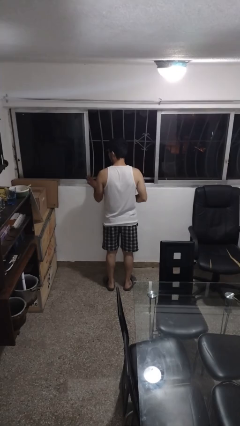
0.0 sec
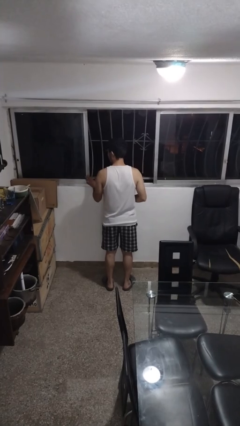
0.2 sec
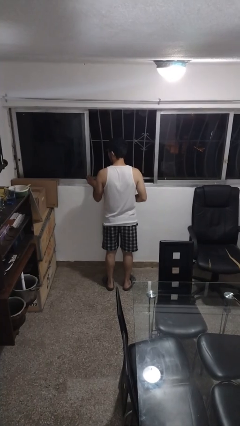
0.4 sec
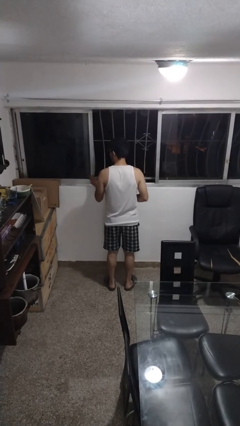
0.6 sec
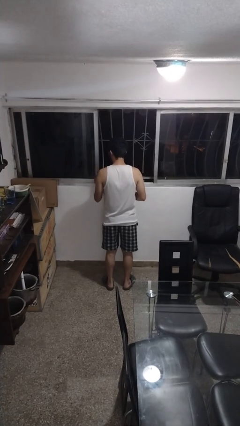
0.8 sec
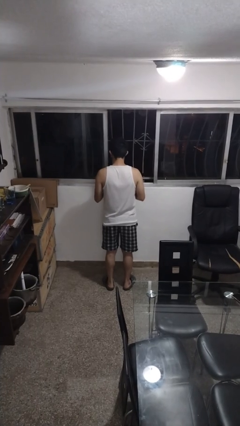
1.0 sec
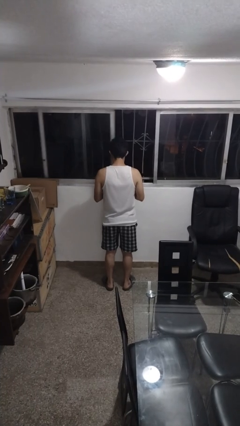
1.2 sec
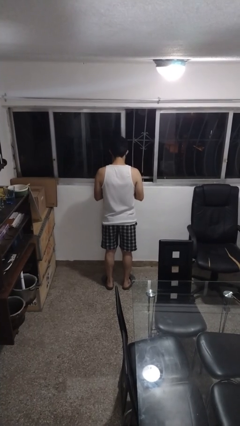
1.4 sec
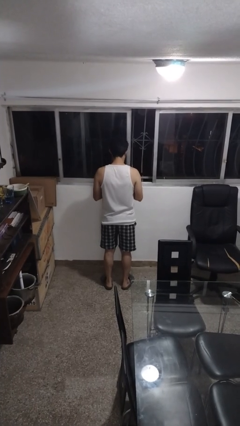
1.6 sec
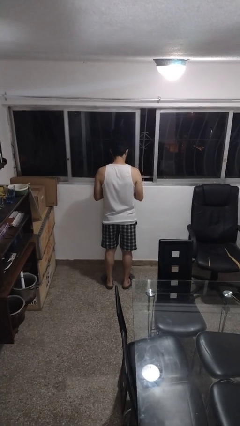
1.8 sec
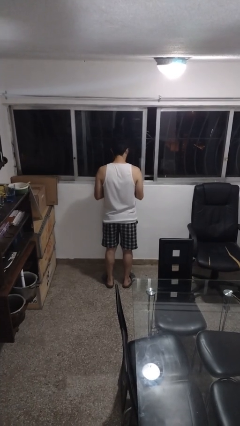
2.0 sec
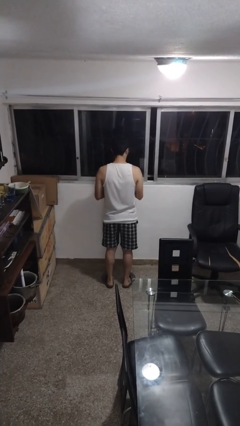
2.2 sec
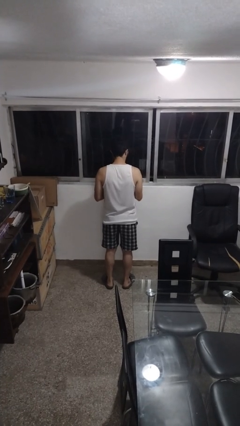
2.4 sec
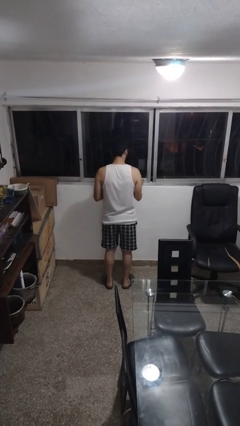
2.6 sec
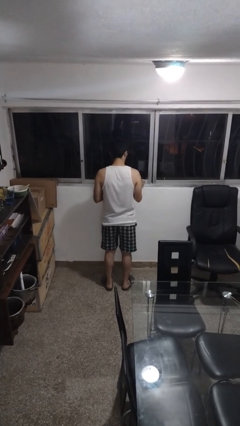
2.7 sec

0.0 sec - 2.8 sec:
person closes home window

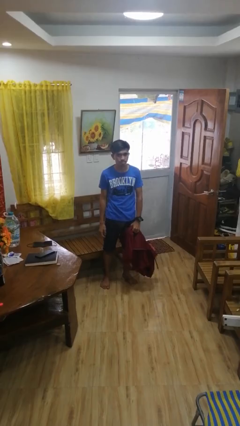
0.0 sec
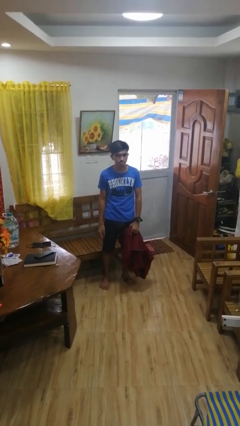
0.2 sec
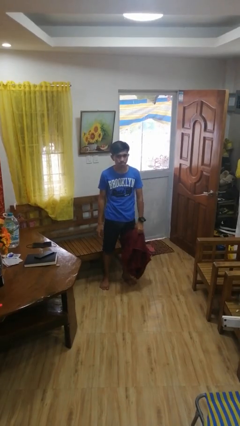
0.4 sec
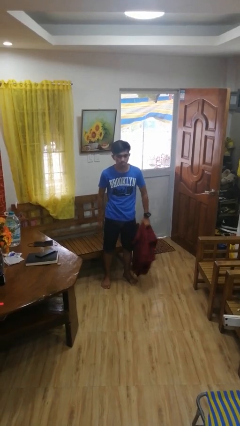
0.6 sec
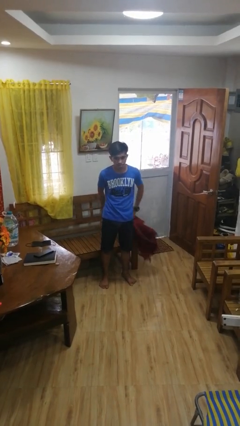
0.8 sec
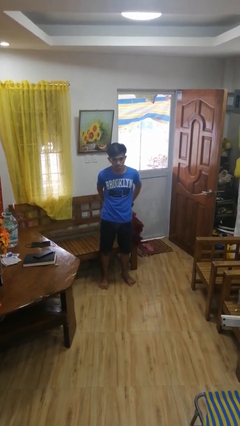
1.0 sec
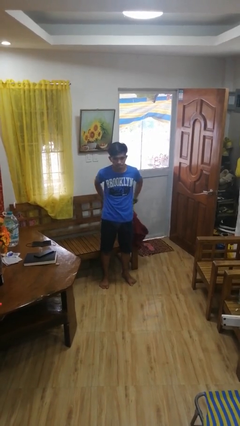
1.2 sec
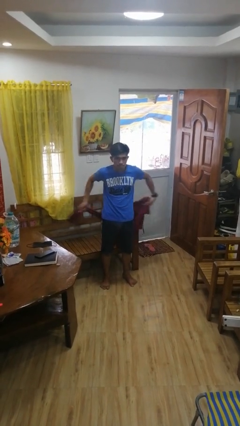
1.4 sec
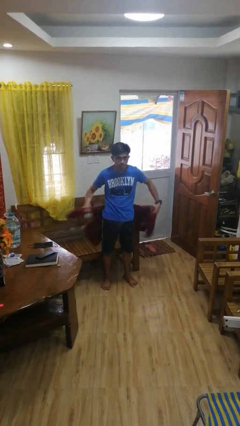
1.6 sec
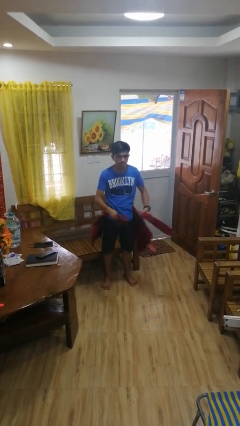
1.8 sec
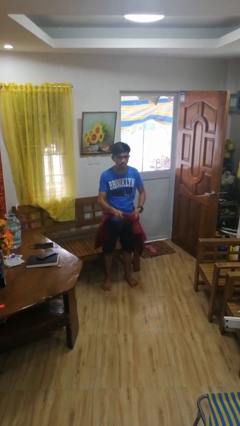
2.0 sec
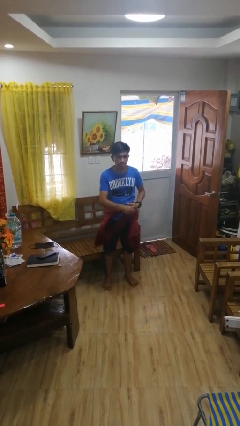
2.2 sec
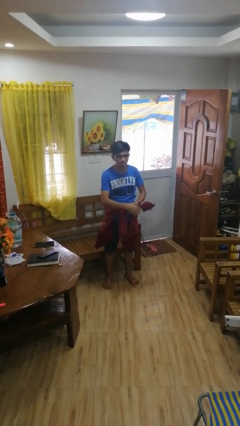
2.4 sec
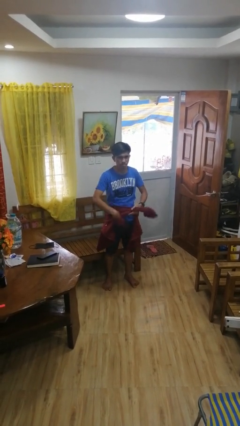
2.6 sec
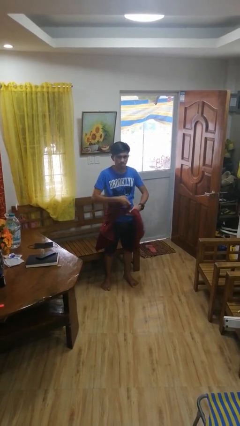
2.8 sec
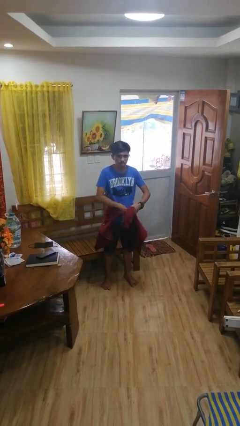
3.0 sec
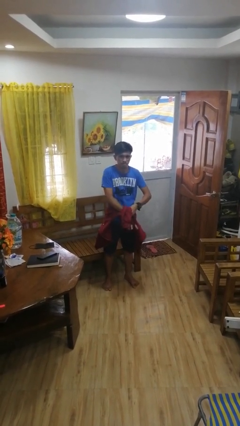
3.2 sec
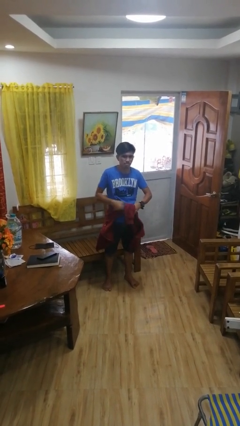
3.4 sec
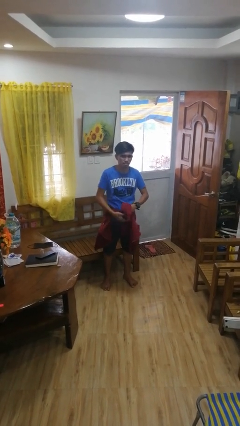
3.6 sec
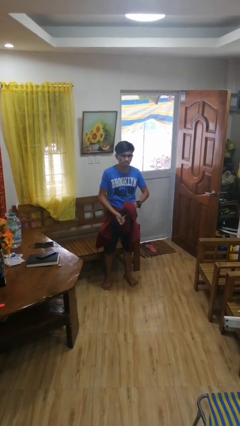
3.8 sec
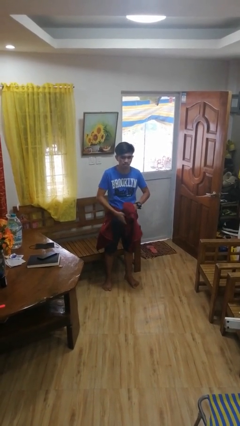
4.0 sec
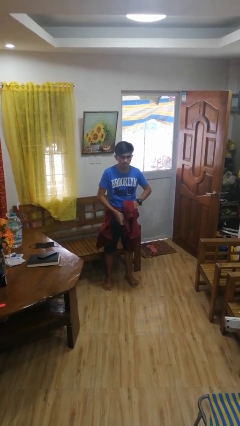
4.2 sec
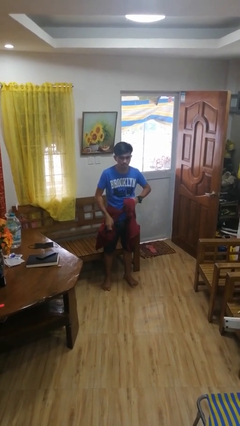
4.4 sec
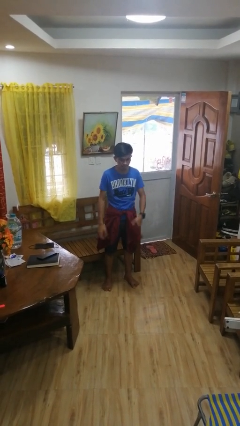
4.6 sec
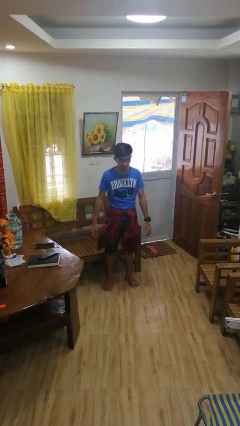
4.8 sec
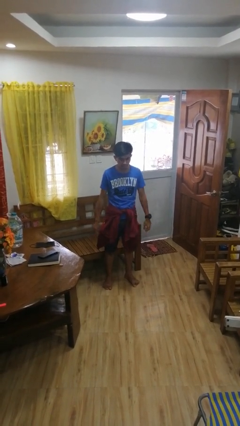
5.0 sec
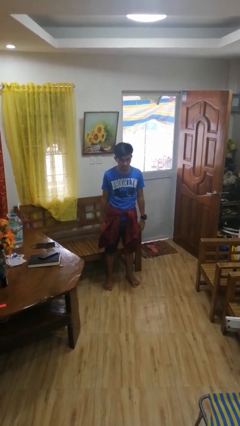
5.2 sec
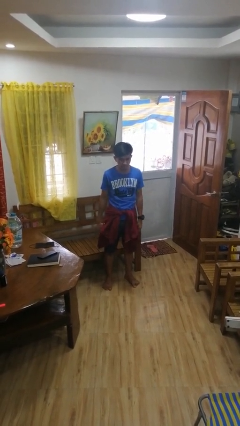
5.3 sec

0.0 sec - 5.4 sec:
person ties jacket around waist

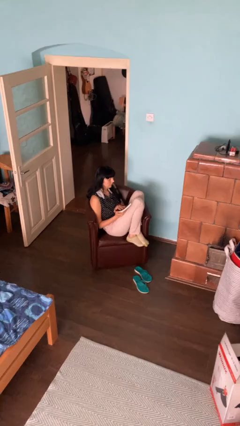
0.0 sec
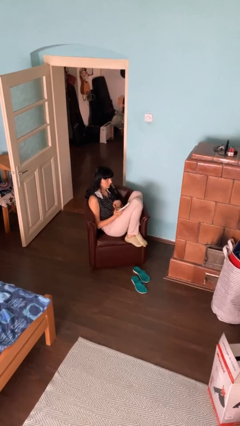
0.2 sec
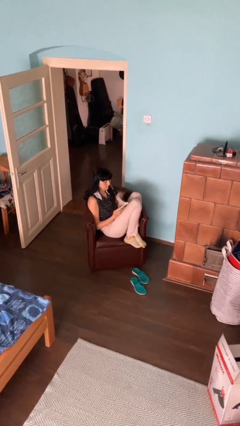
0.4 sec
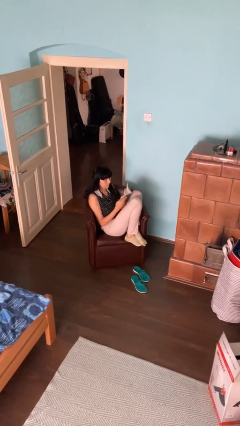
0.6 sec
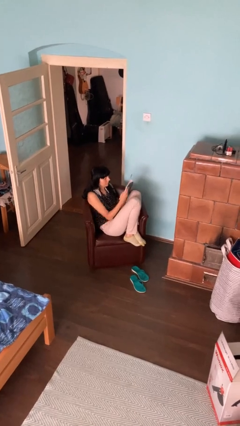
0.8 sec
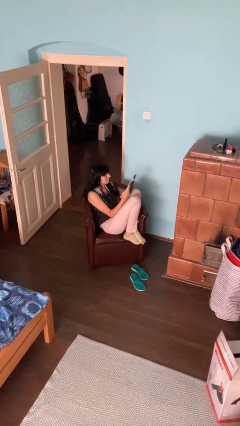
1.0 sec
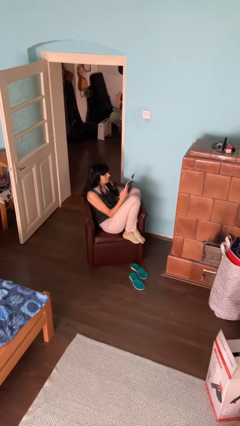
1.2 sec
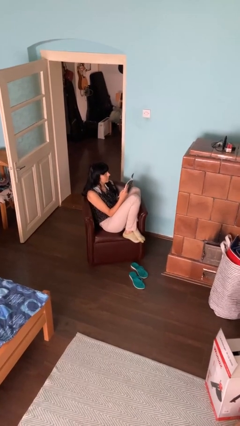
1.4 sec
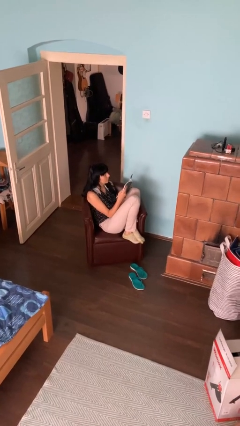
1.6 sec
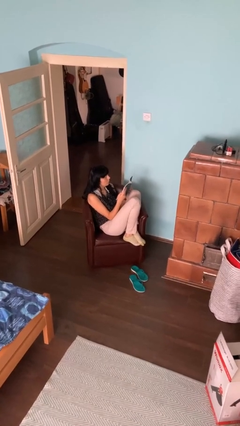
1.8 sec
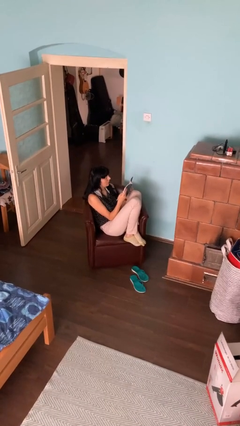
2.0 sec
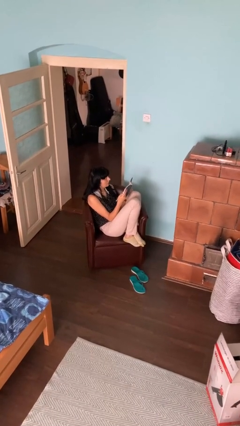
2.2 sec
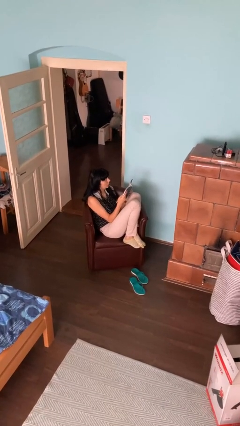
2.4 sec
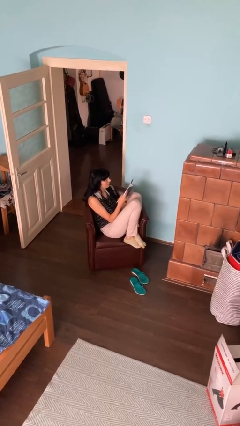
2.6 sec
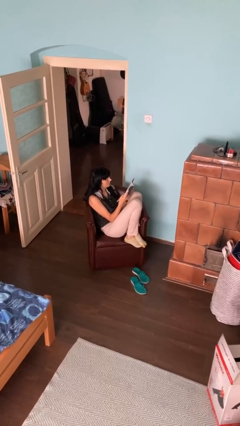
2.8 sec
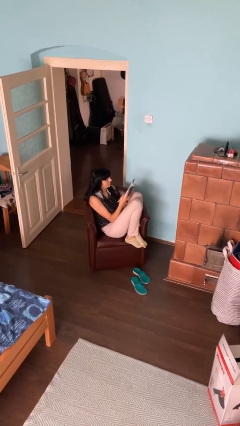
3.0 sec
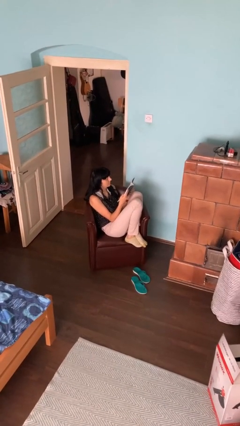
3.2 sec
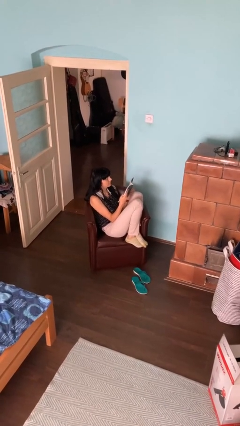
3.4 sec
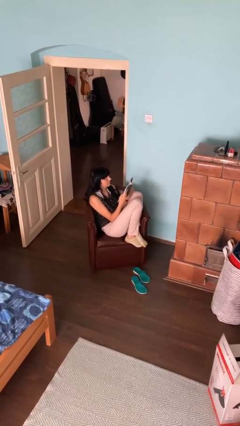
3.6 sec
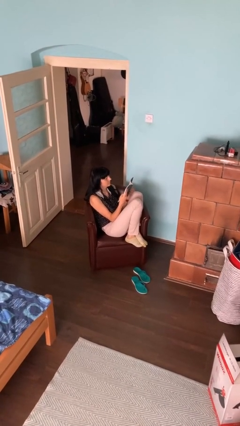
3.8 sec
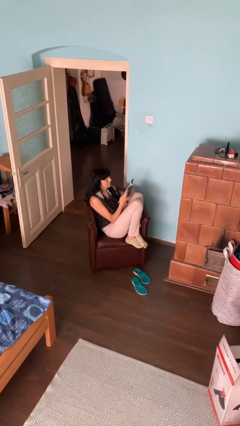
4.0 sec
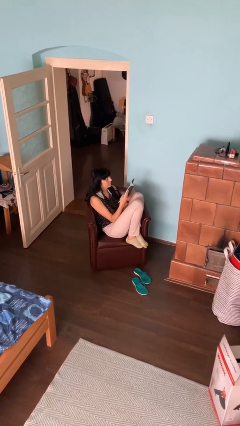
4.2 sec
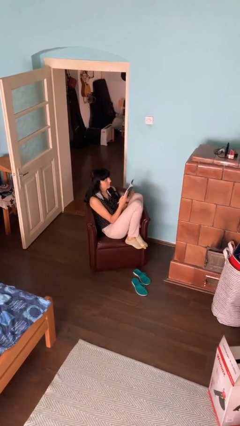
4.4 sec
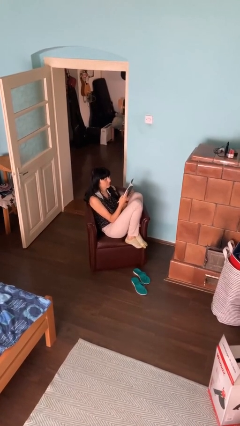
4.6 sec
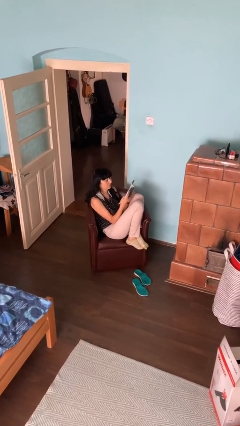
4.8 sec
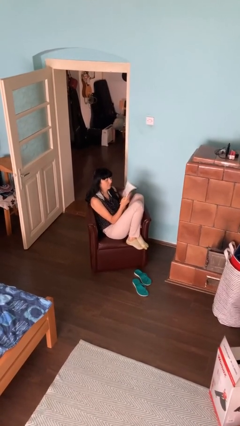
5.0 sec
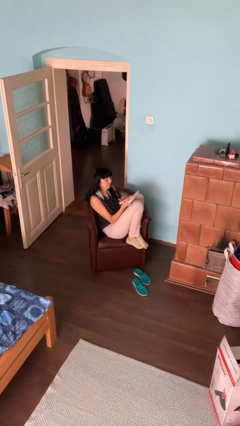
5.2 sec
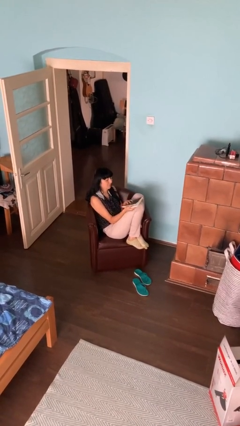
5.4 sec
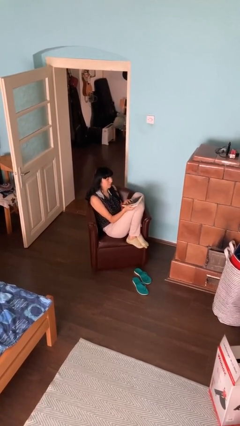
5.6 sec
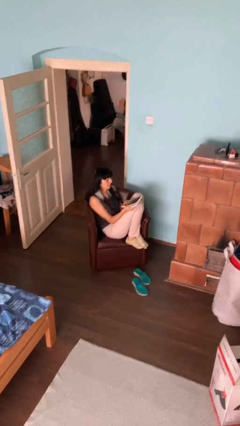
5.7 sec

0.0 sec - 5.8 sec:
person reads book

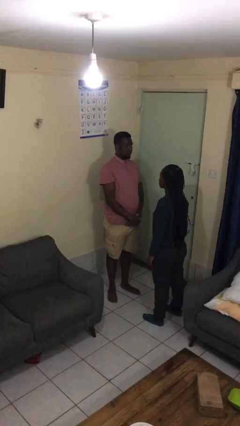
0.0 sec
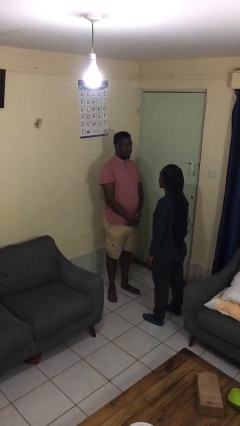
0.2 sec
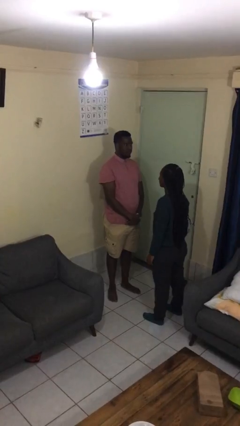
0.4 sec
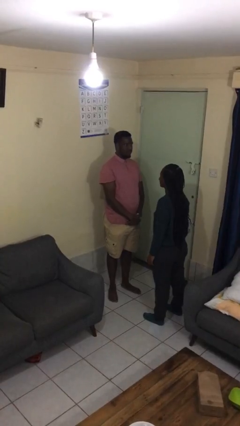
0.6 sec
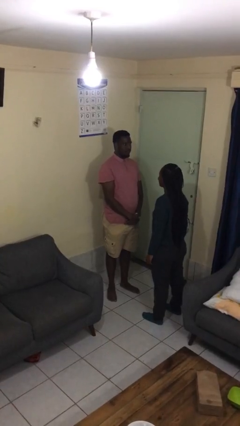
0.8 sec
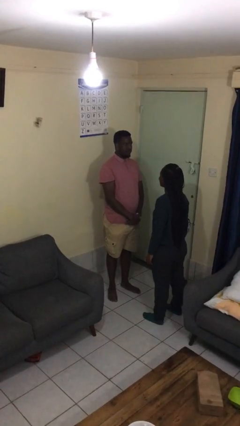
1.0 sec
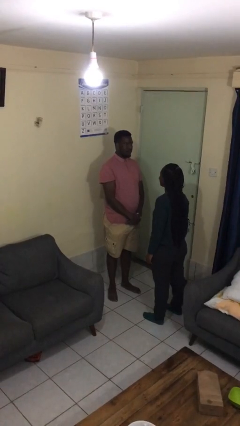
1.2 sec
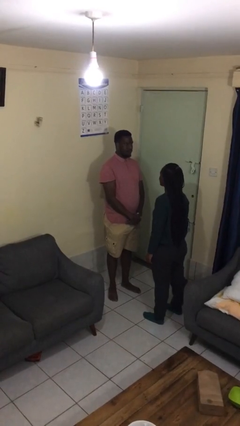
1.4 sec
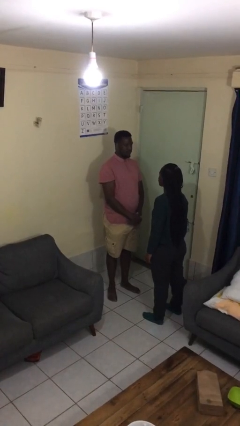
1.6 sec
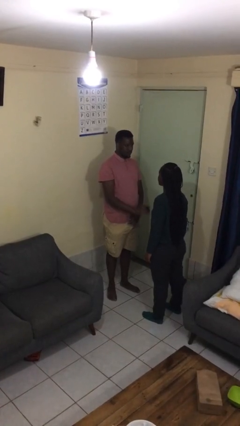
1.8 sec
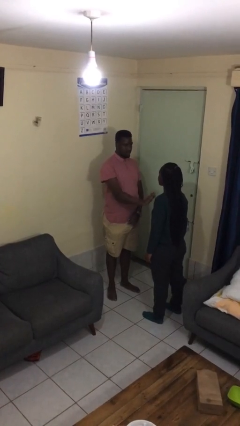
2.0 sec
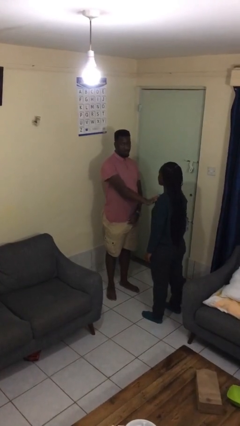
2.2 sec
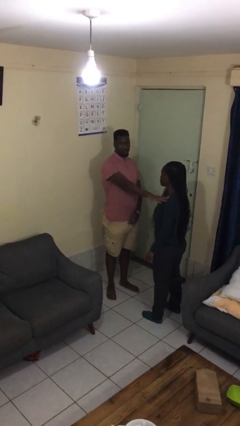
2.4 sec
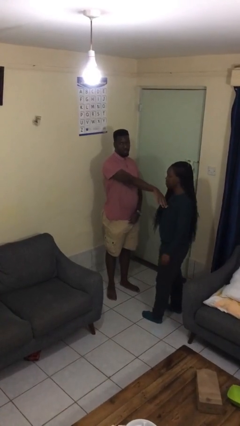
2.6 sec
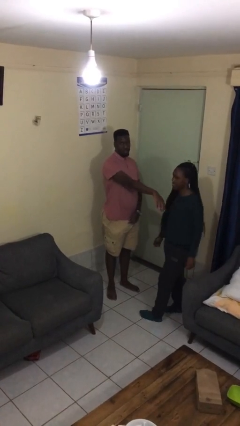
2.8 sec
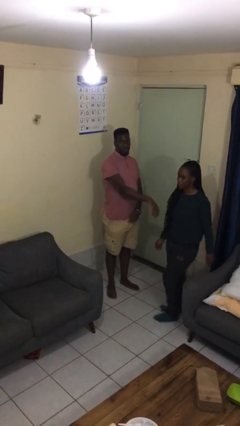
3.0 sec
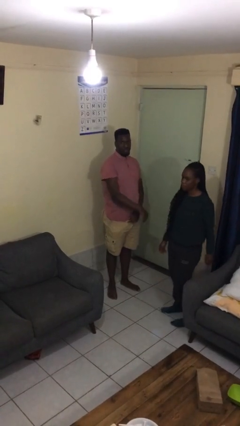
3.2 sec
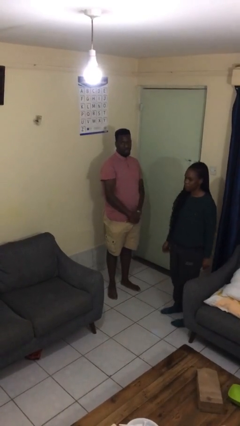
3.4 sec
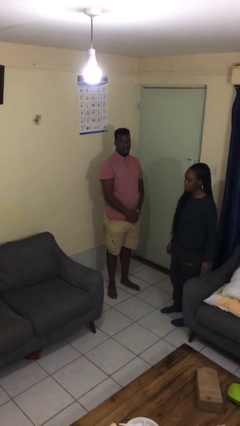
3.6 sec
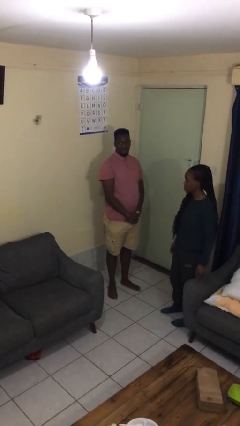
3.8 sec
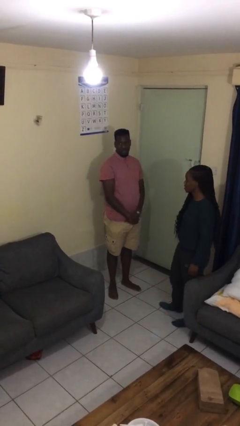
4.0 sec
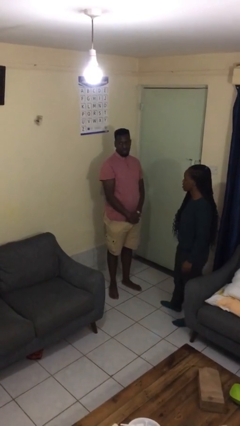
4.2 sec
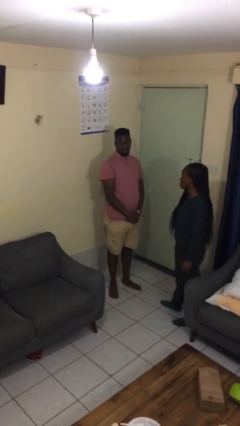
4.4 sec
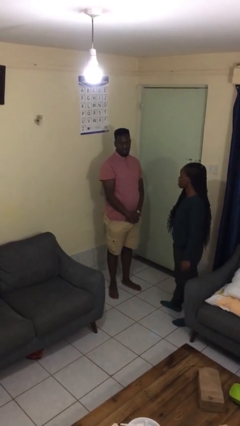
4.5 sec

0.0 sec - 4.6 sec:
person shoves person
